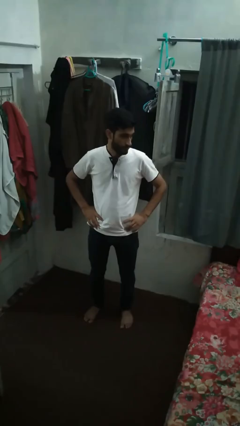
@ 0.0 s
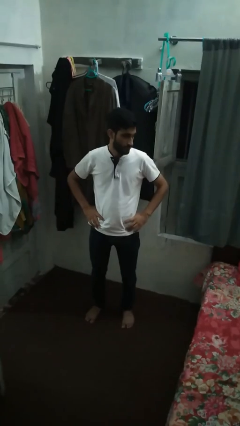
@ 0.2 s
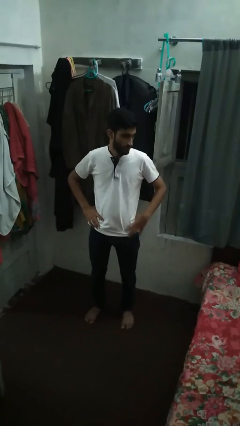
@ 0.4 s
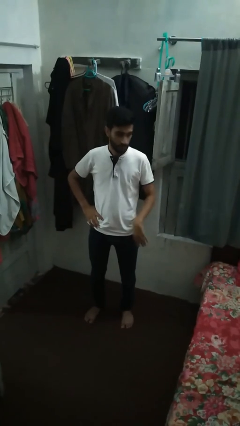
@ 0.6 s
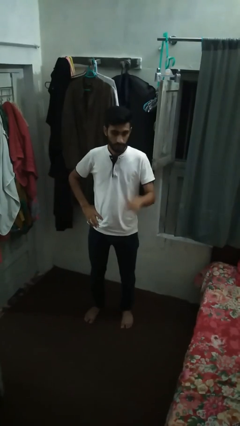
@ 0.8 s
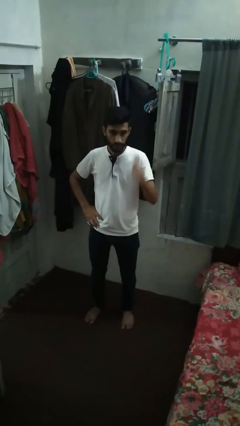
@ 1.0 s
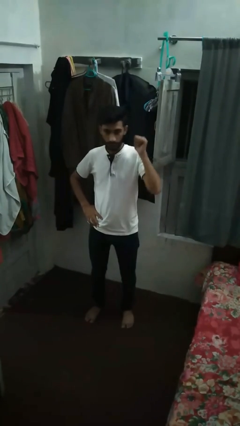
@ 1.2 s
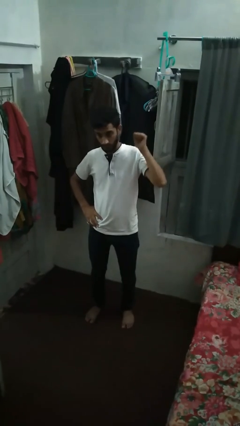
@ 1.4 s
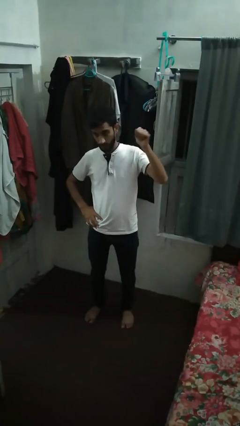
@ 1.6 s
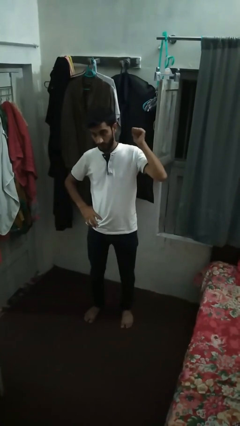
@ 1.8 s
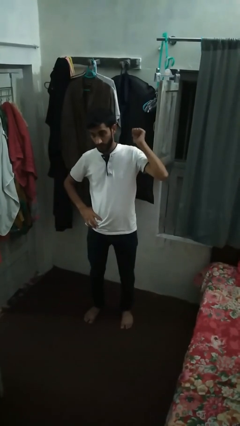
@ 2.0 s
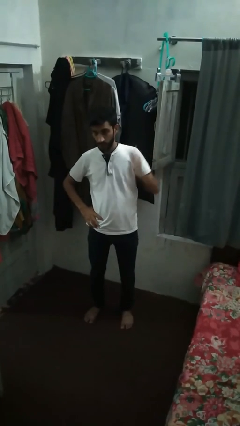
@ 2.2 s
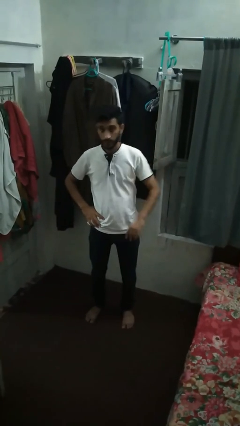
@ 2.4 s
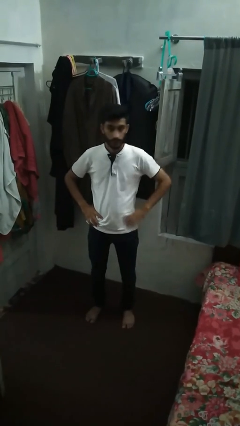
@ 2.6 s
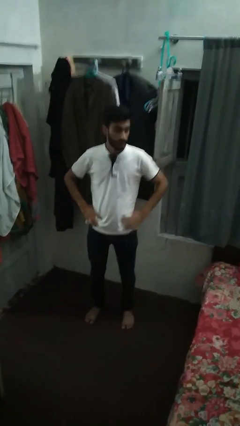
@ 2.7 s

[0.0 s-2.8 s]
person gestures behind me

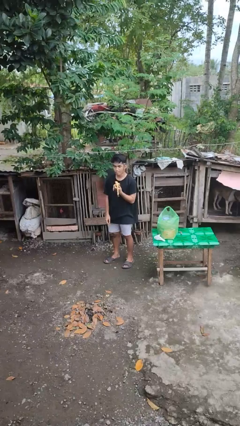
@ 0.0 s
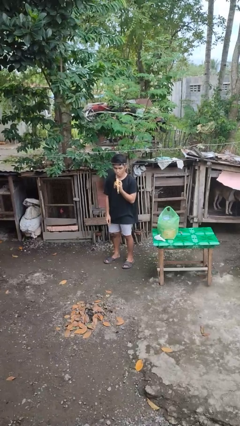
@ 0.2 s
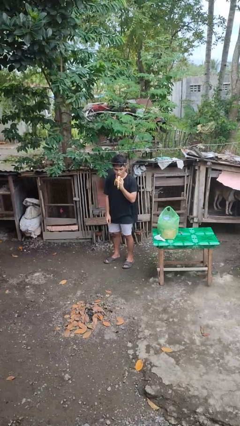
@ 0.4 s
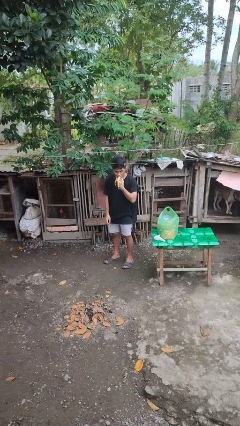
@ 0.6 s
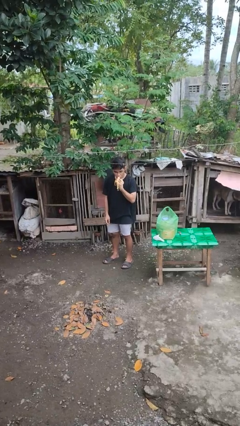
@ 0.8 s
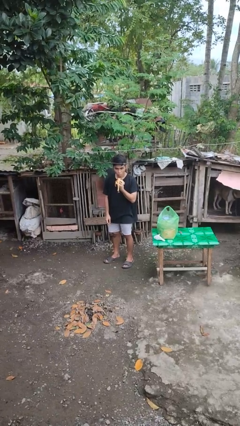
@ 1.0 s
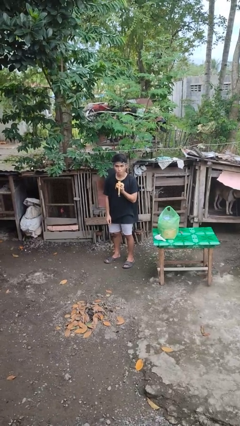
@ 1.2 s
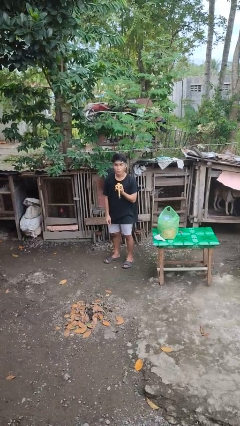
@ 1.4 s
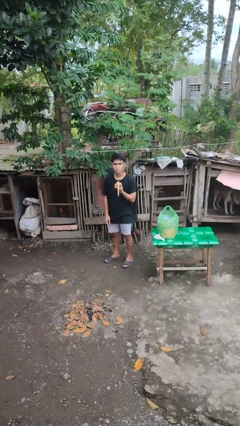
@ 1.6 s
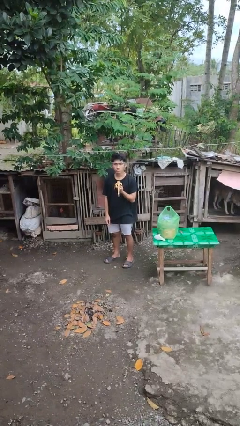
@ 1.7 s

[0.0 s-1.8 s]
person eats banana

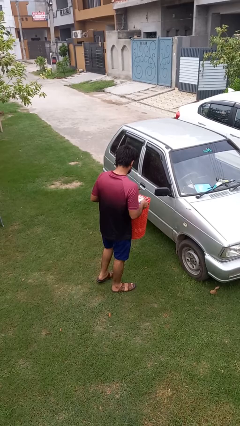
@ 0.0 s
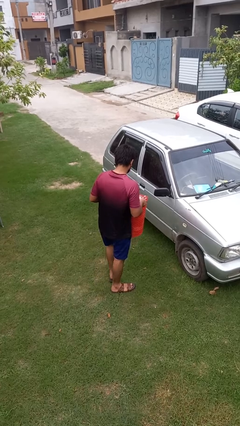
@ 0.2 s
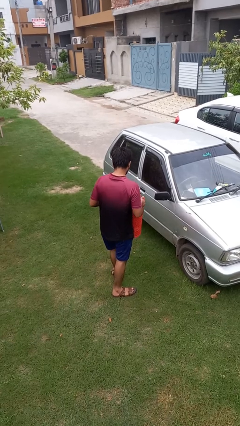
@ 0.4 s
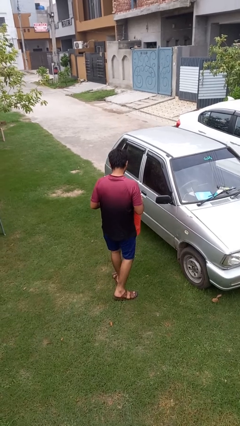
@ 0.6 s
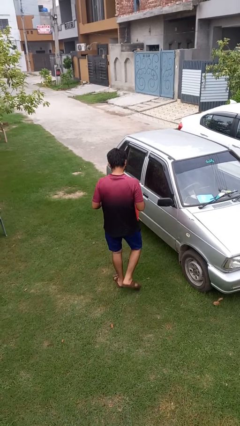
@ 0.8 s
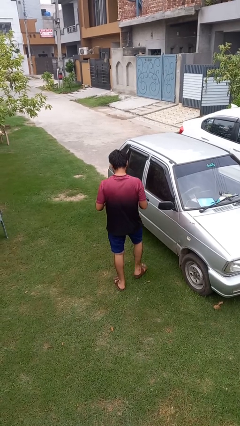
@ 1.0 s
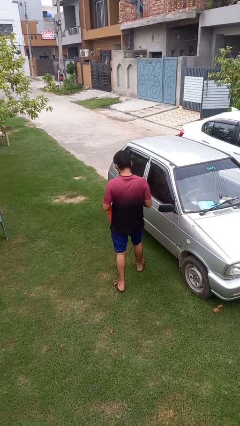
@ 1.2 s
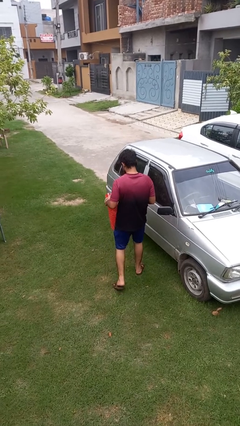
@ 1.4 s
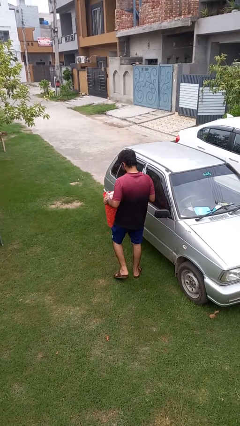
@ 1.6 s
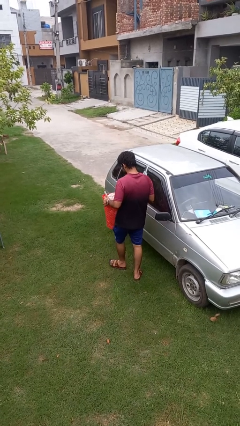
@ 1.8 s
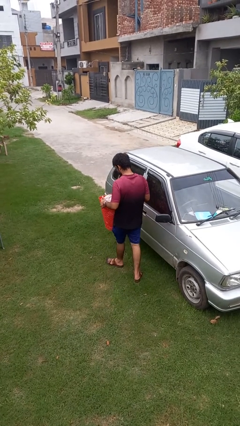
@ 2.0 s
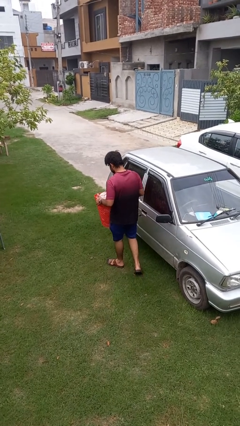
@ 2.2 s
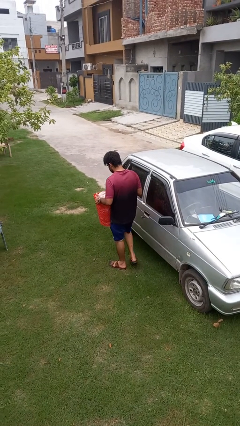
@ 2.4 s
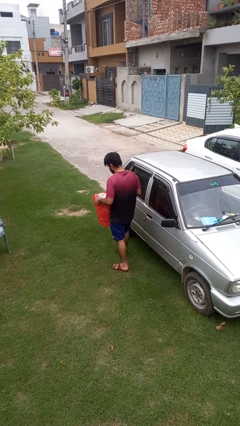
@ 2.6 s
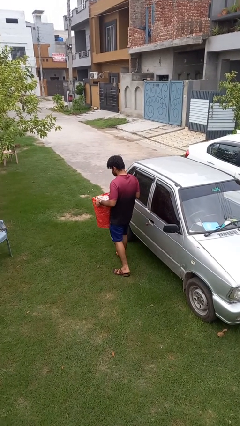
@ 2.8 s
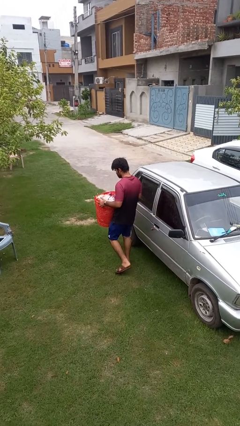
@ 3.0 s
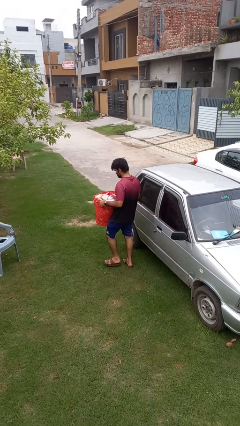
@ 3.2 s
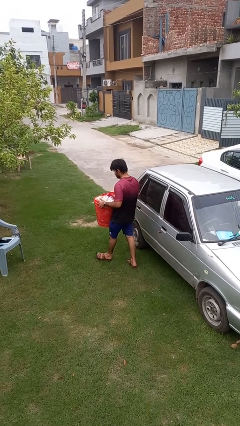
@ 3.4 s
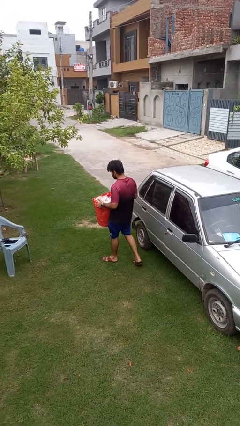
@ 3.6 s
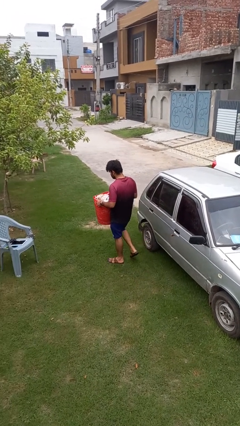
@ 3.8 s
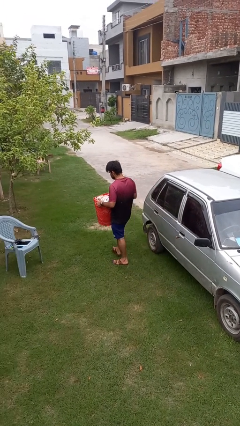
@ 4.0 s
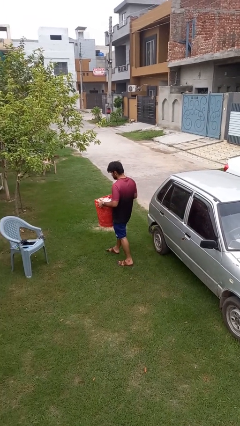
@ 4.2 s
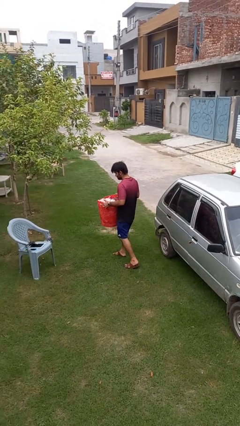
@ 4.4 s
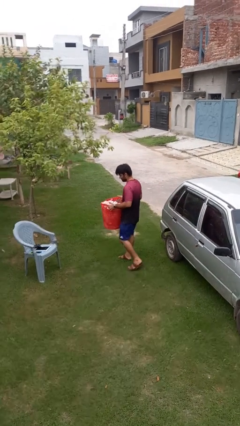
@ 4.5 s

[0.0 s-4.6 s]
person carries laundry basket

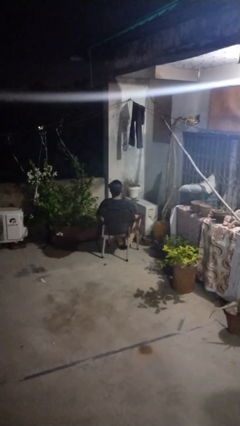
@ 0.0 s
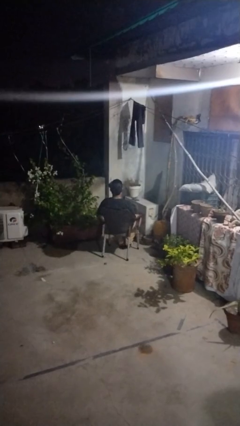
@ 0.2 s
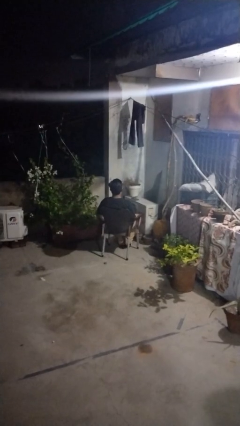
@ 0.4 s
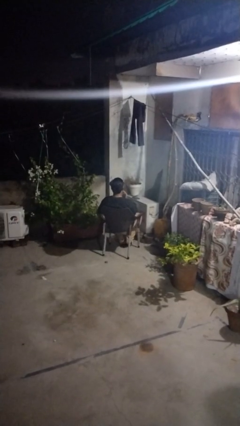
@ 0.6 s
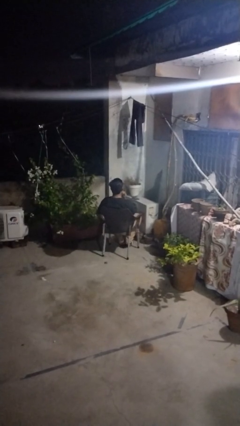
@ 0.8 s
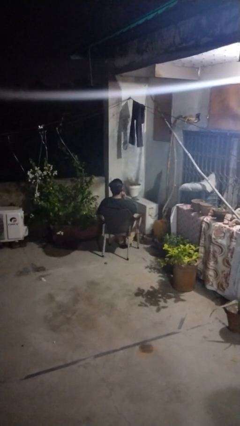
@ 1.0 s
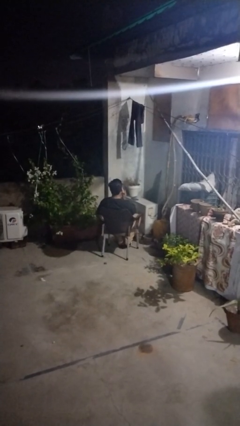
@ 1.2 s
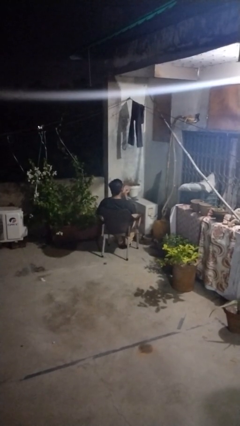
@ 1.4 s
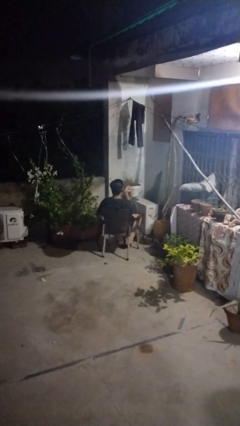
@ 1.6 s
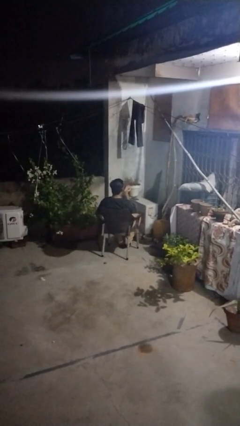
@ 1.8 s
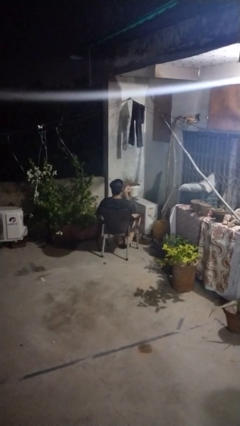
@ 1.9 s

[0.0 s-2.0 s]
person gestures blow kiss

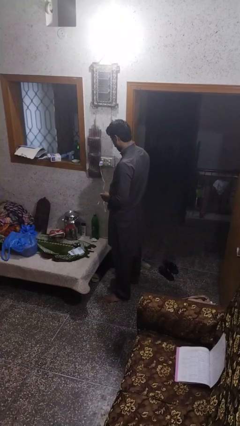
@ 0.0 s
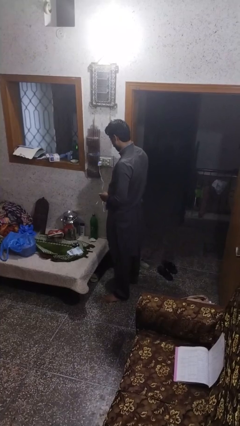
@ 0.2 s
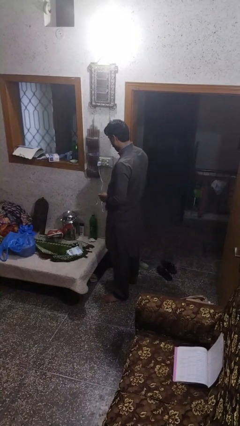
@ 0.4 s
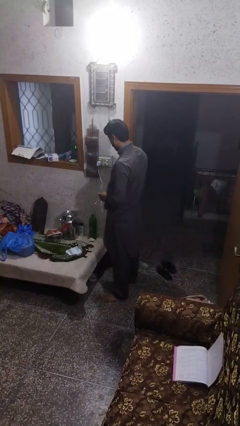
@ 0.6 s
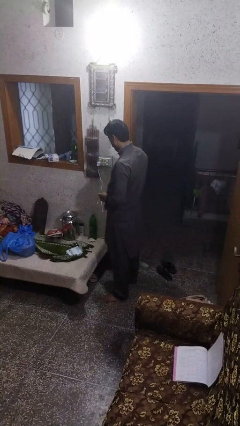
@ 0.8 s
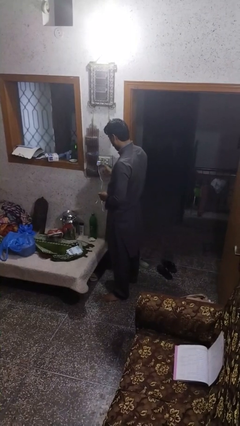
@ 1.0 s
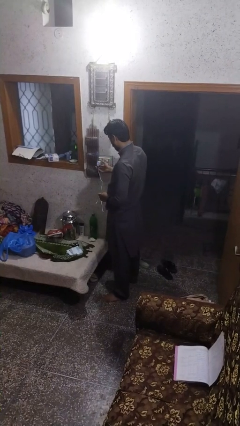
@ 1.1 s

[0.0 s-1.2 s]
person unplugs from electrical socket

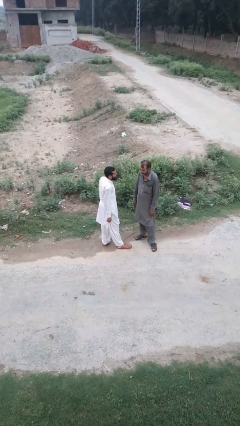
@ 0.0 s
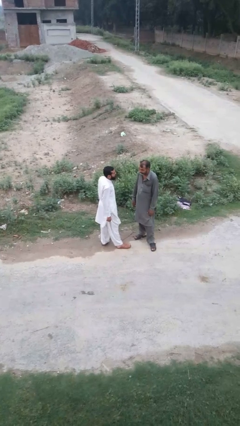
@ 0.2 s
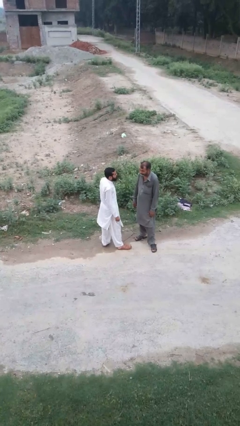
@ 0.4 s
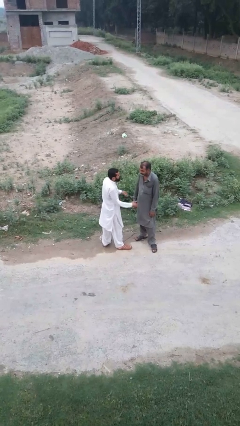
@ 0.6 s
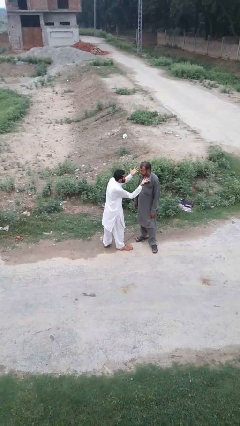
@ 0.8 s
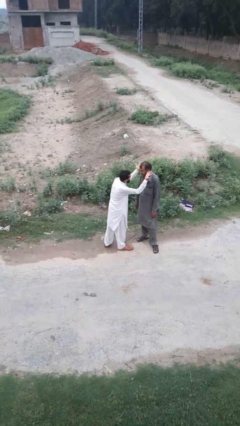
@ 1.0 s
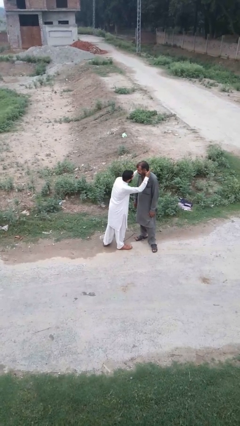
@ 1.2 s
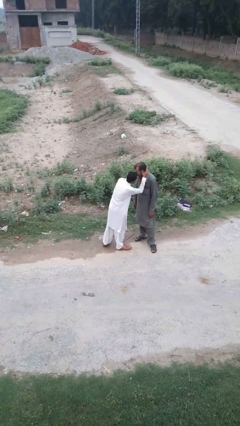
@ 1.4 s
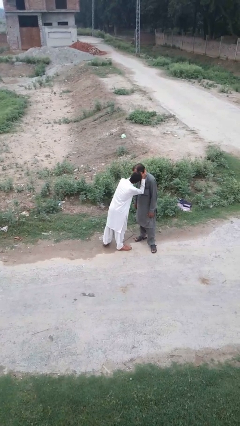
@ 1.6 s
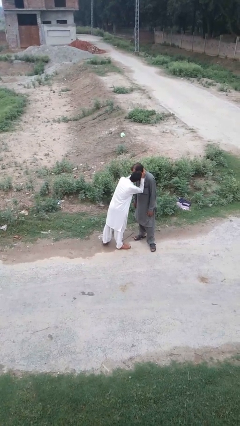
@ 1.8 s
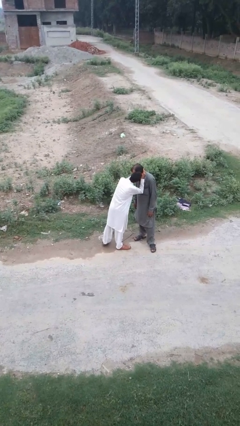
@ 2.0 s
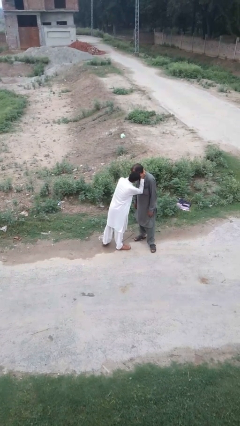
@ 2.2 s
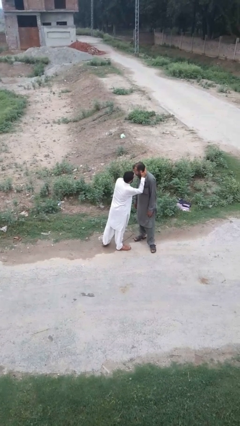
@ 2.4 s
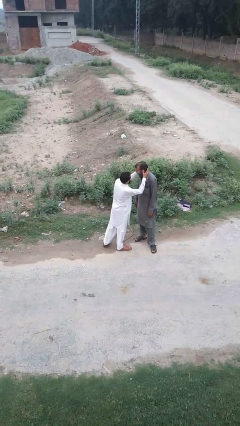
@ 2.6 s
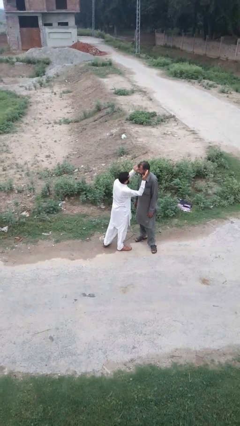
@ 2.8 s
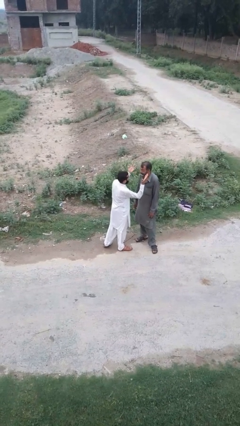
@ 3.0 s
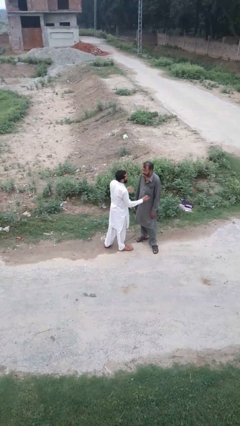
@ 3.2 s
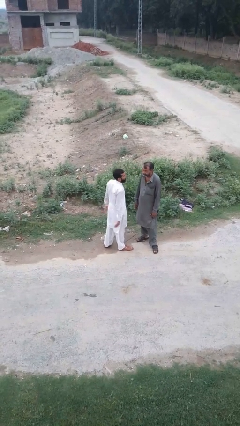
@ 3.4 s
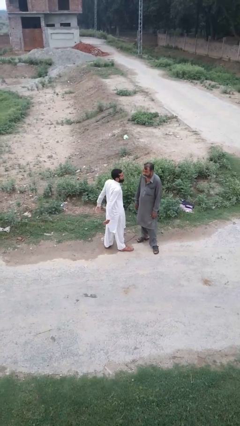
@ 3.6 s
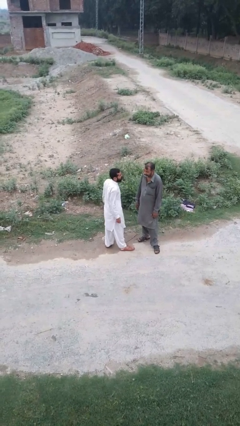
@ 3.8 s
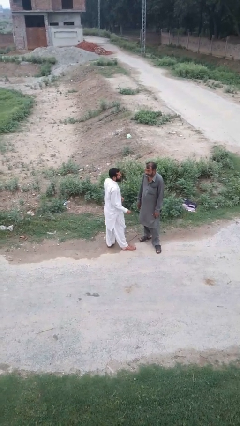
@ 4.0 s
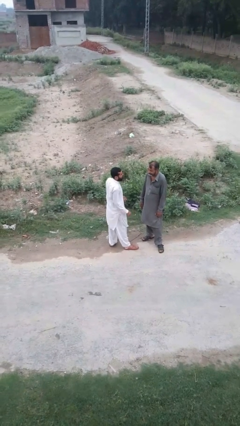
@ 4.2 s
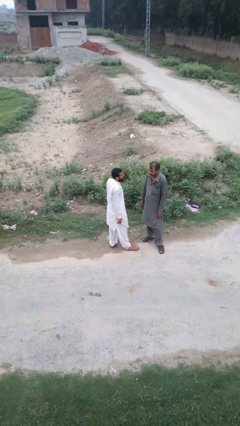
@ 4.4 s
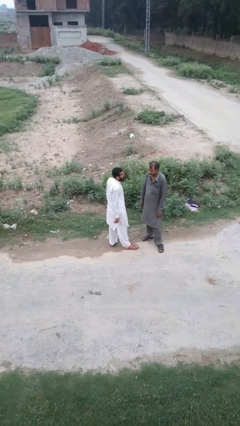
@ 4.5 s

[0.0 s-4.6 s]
person kisses cheek of person
